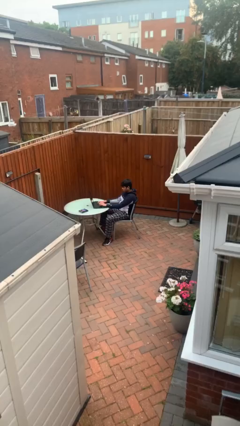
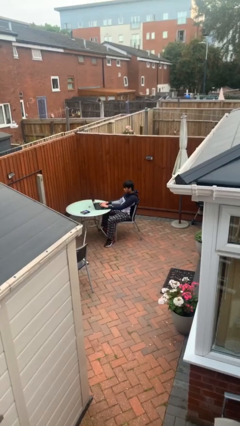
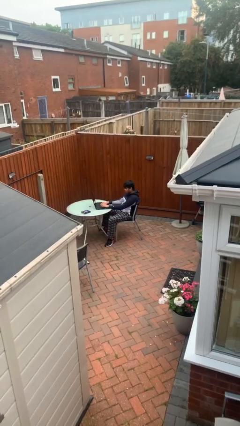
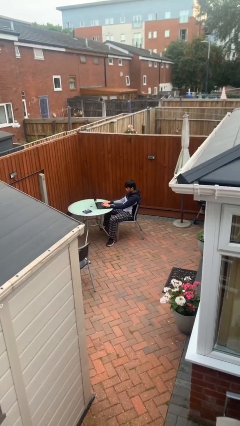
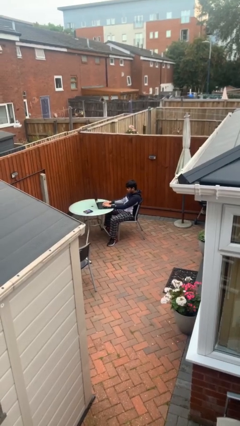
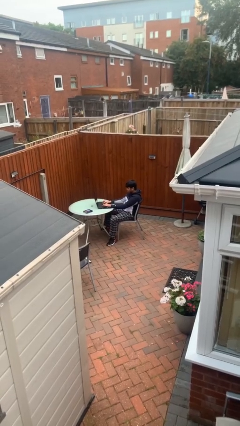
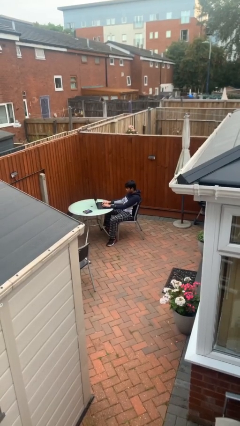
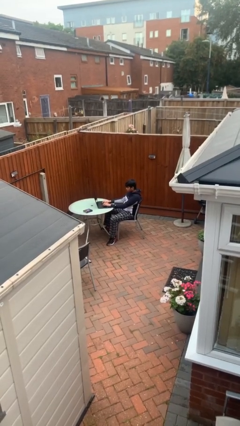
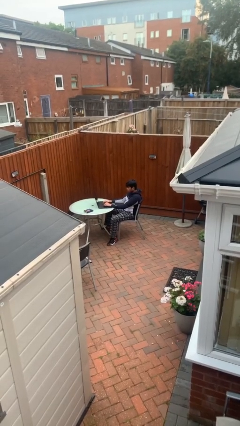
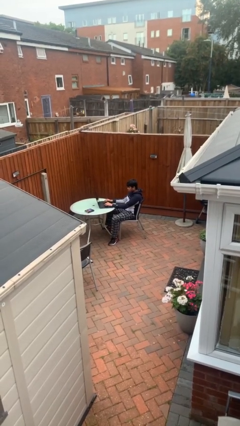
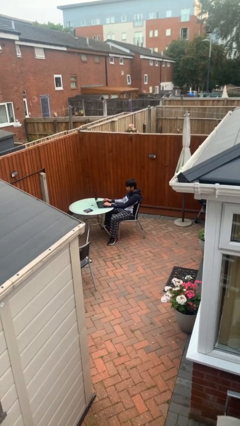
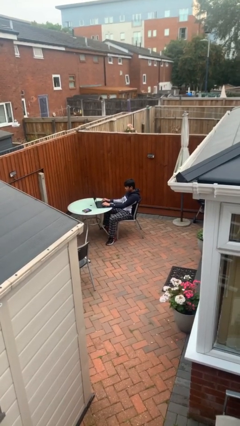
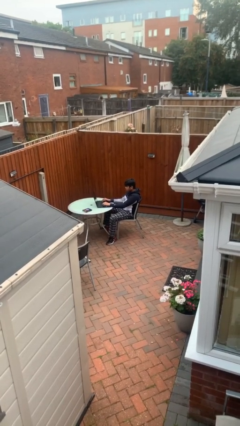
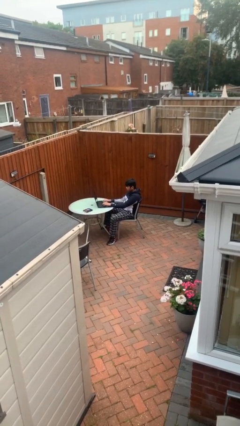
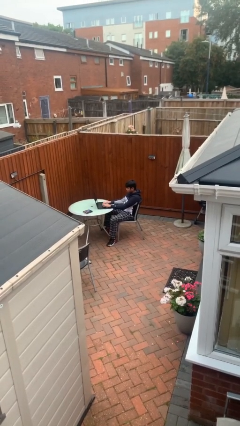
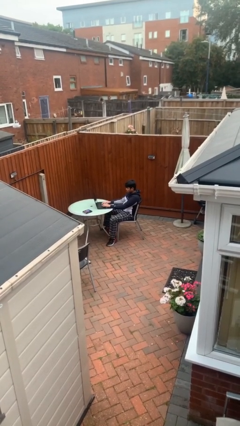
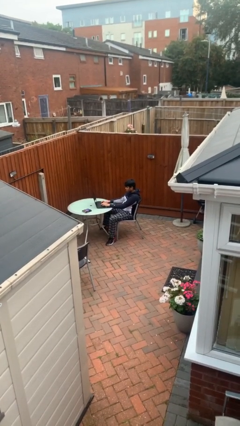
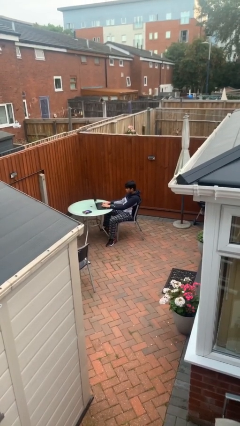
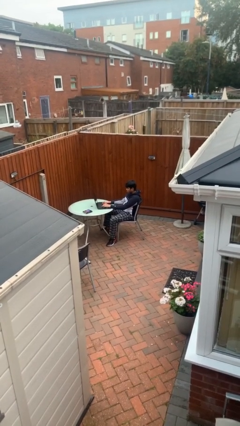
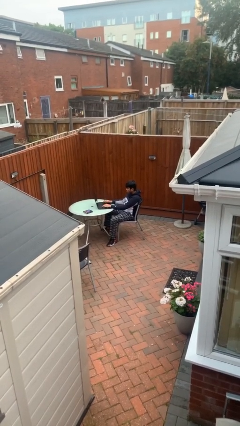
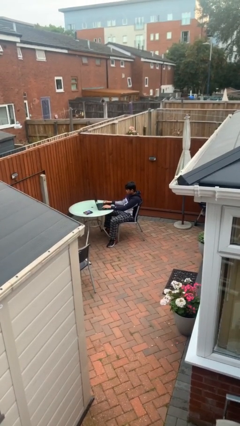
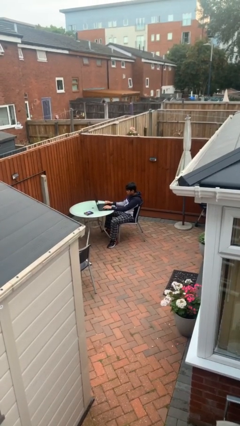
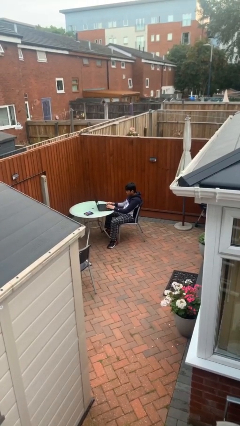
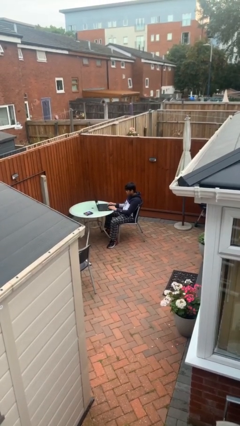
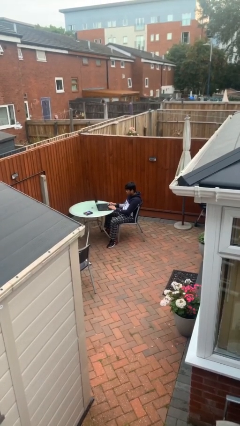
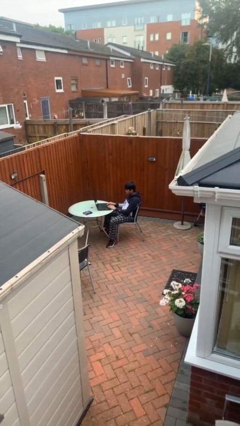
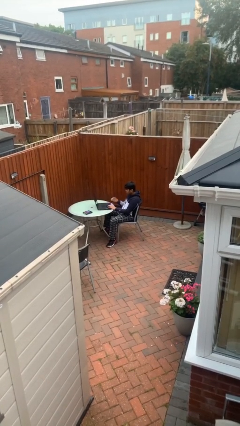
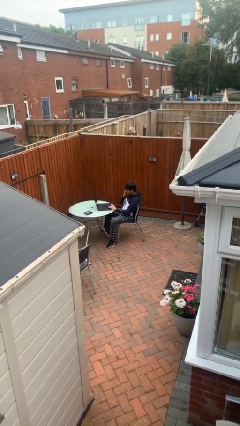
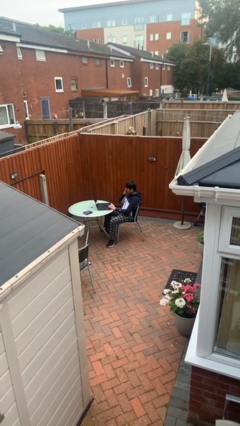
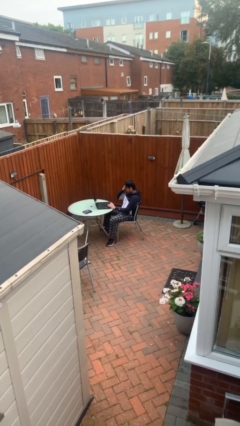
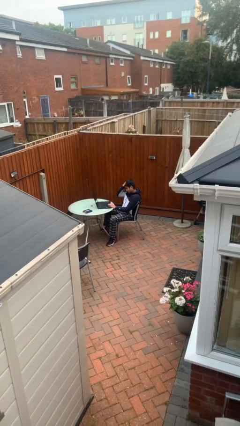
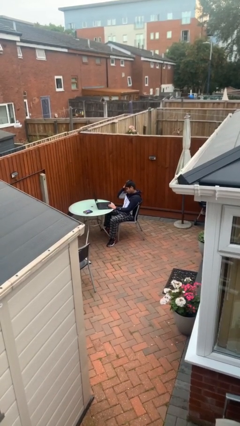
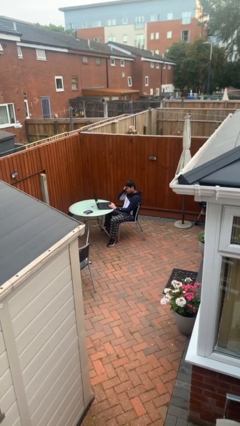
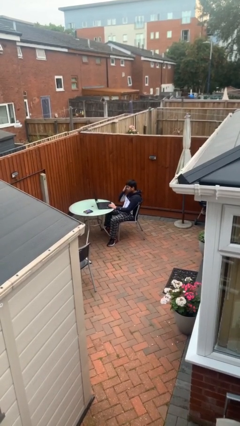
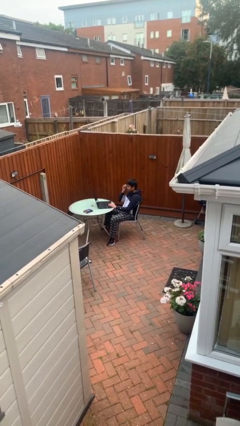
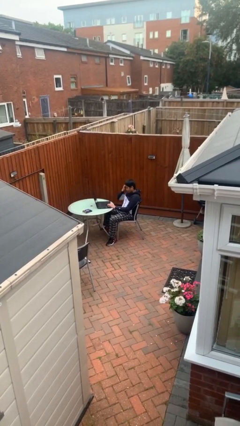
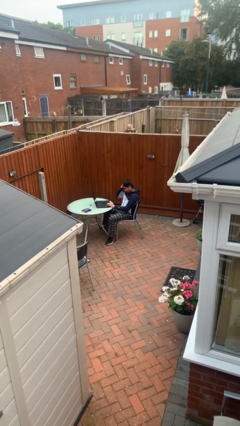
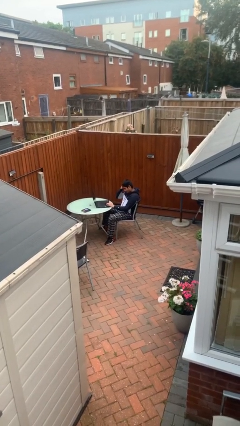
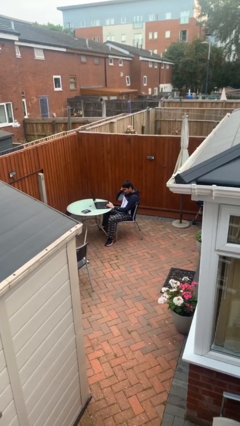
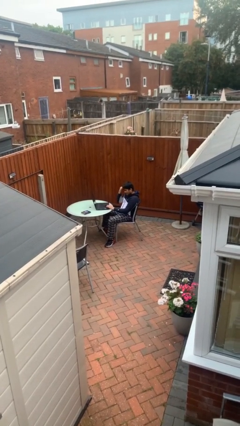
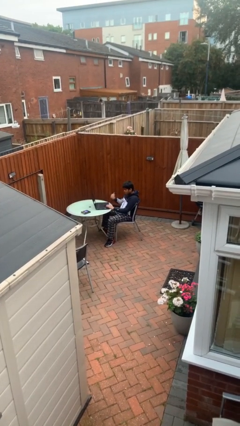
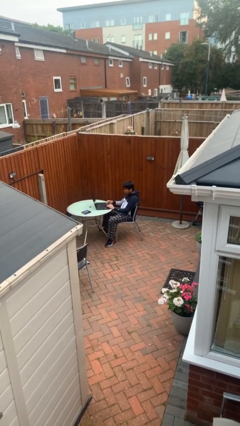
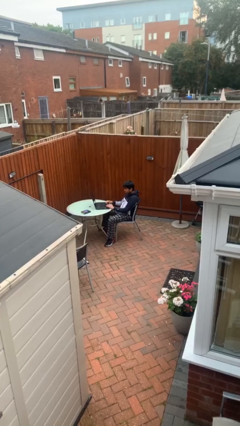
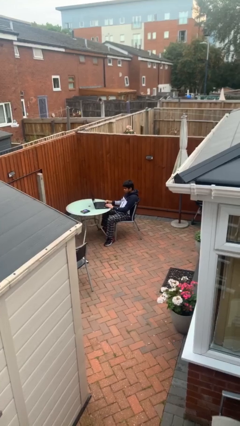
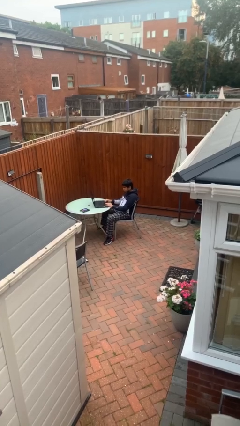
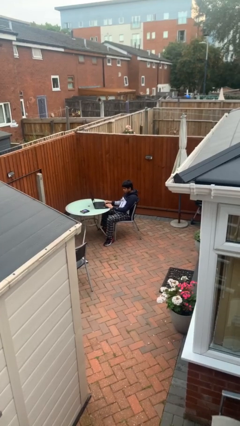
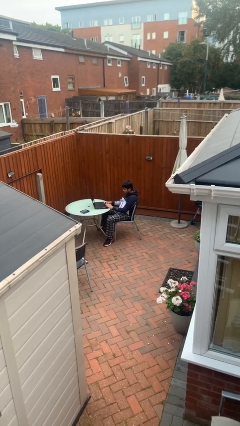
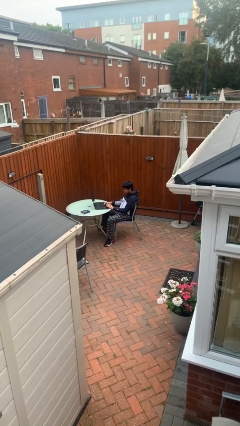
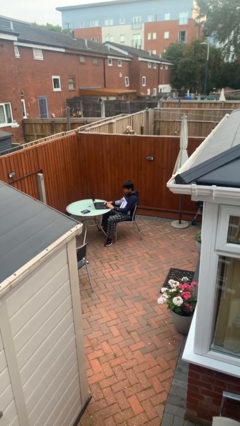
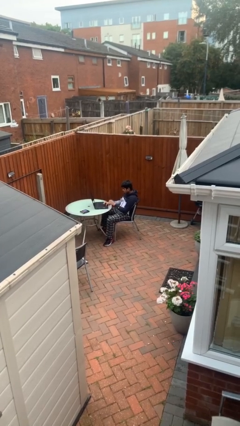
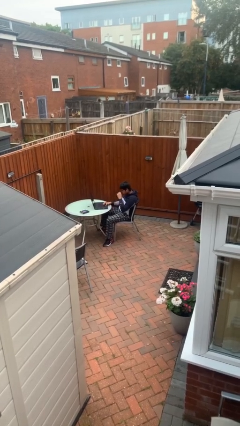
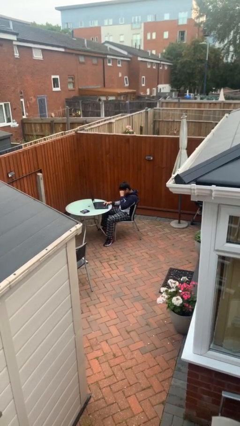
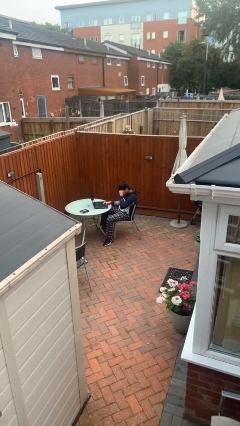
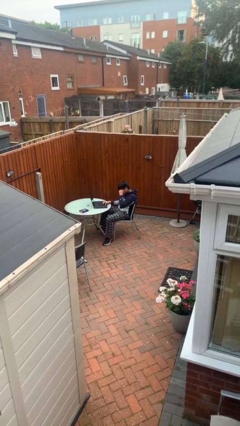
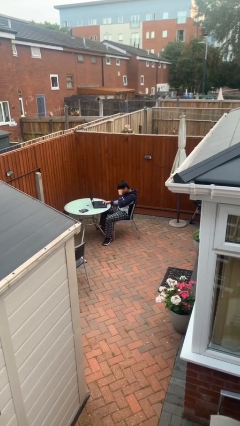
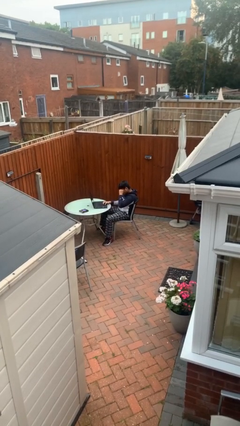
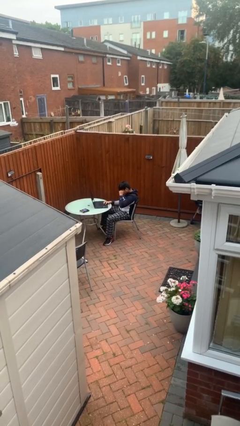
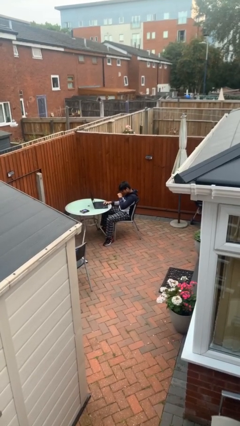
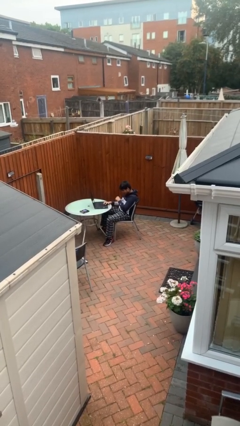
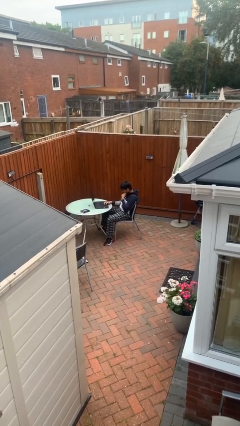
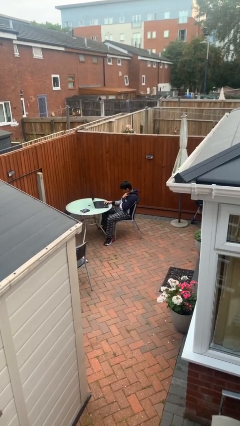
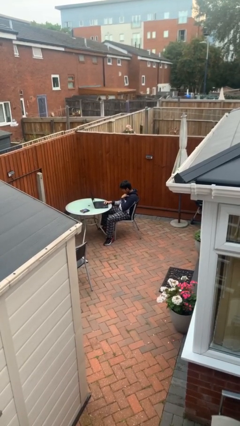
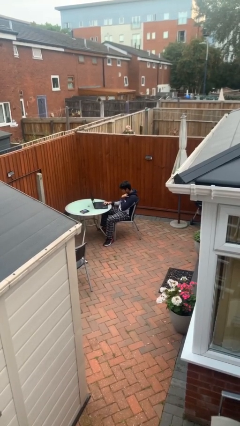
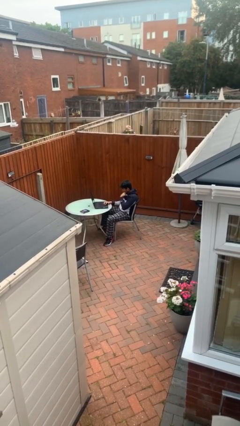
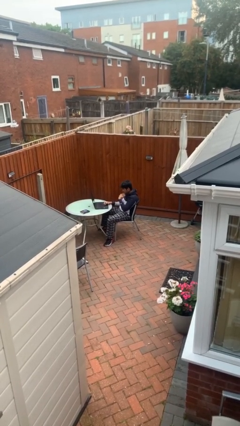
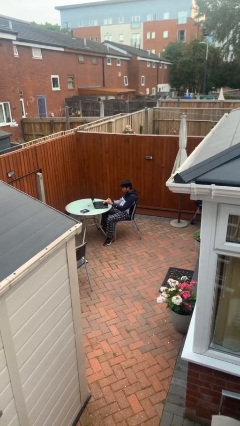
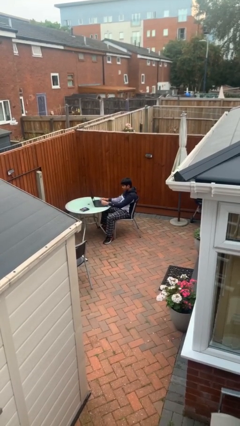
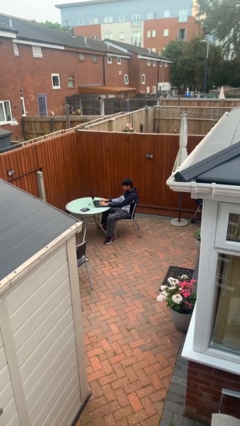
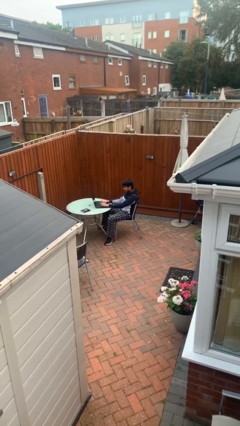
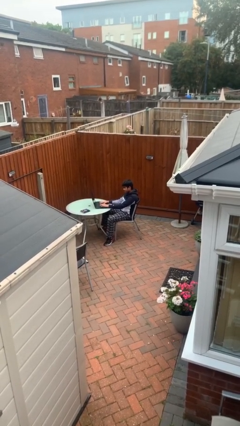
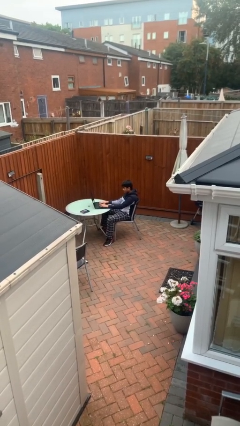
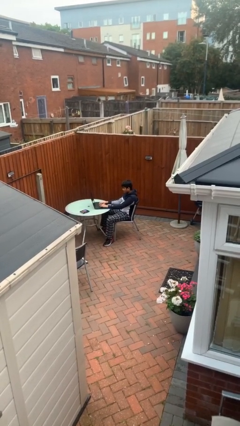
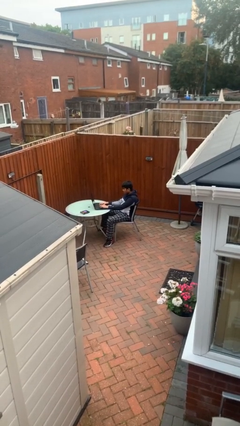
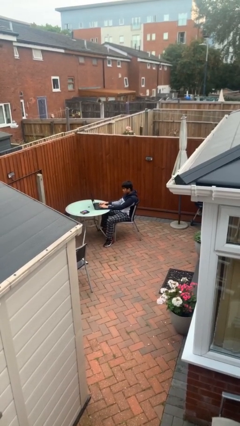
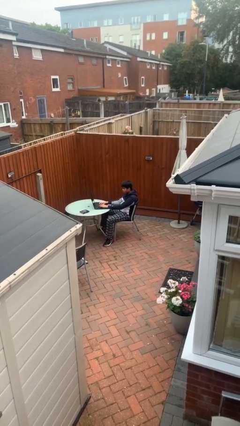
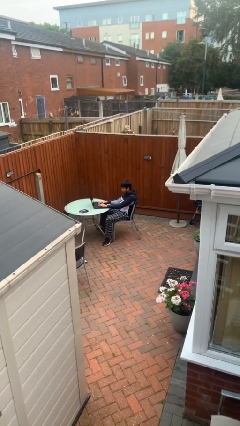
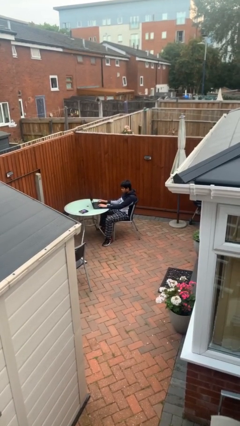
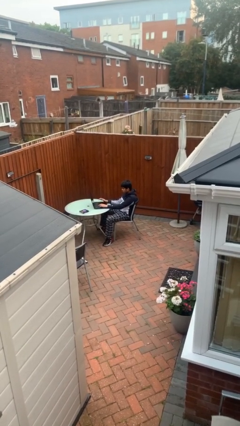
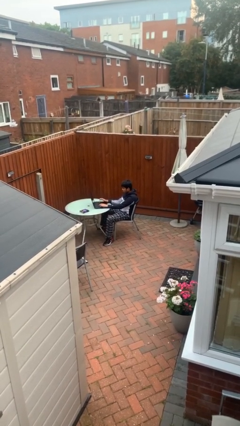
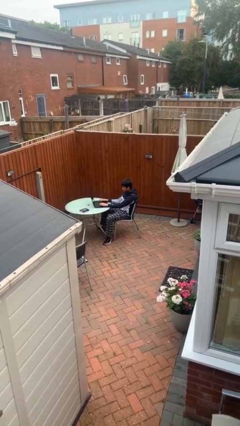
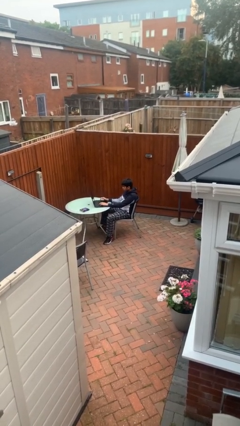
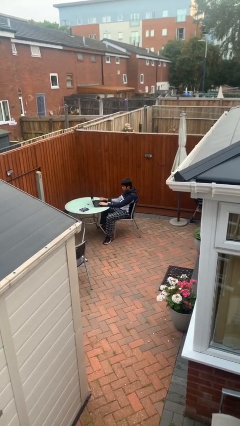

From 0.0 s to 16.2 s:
person interacts with laptop

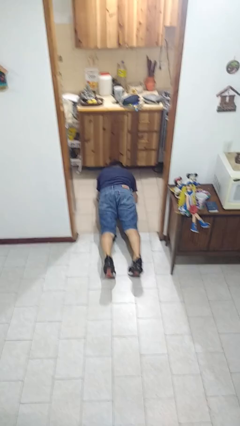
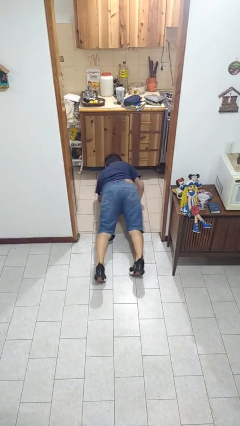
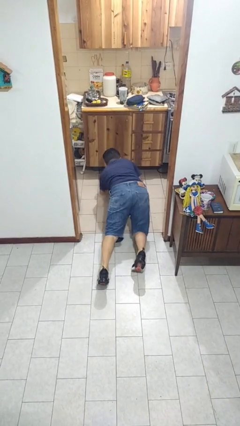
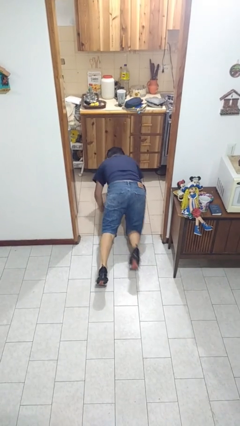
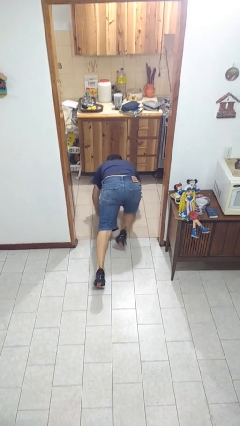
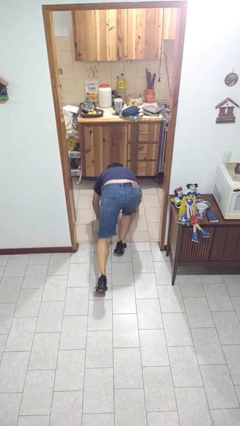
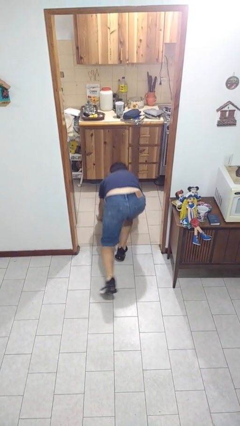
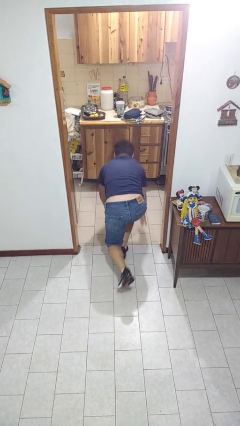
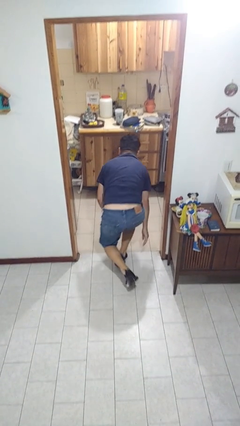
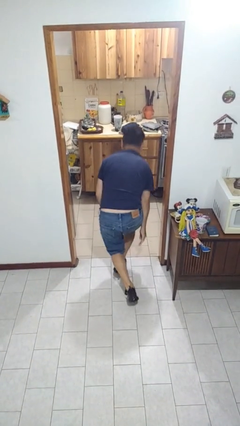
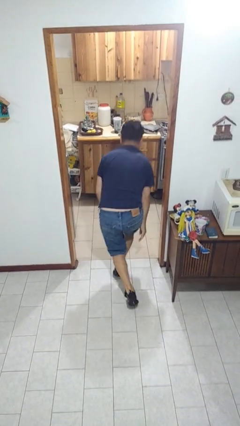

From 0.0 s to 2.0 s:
person stands up from floor
